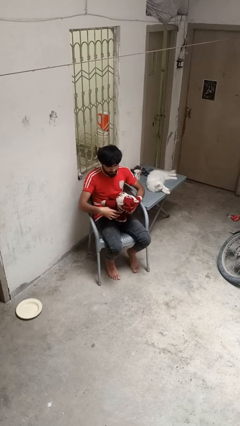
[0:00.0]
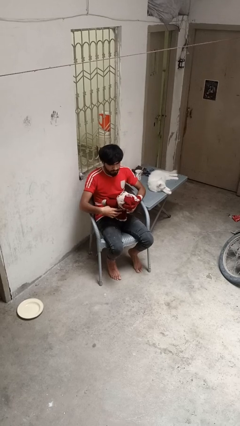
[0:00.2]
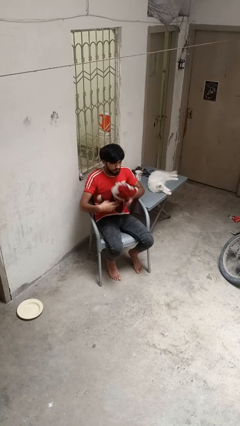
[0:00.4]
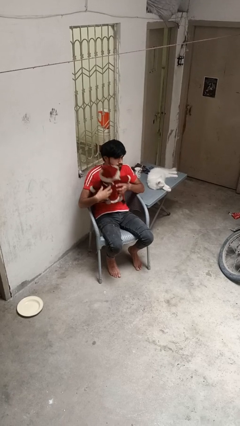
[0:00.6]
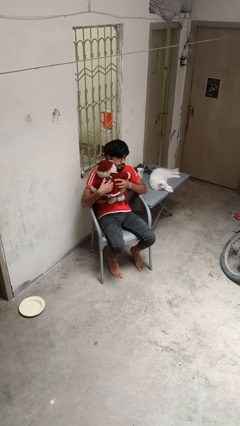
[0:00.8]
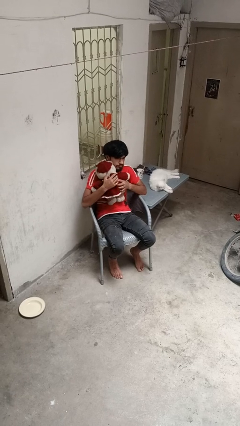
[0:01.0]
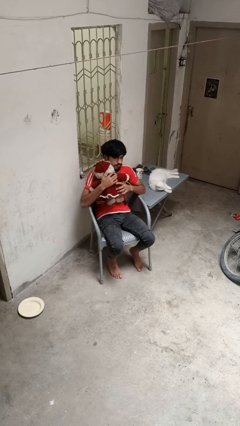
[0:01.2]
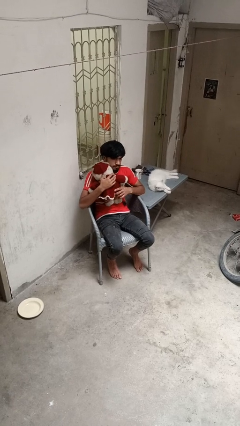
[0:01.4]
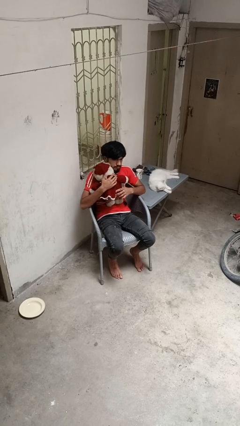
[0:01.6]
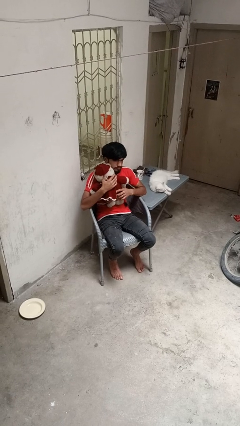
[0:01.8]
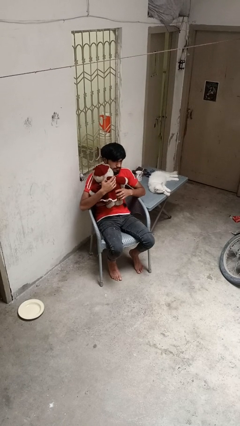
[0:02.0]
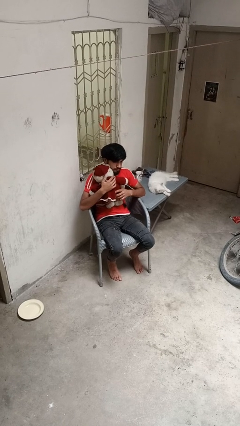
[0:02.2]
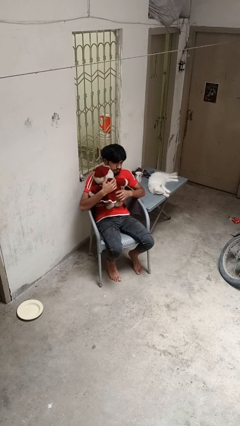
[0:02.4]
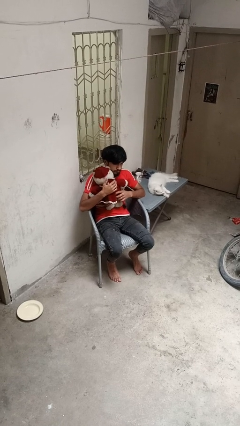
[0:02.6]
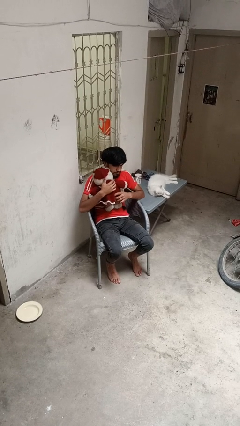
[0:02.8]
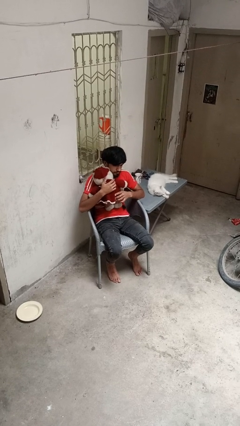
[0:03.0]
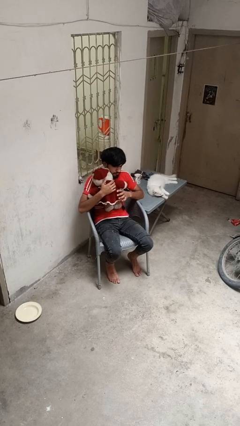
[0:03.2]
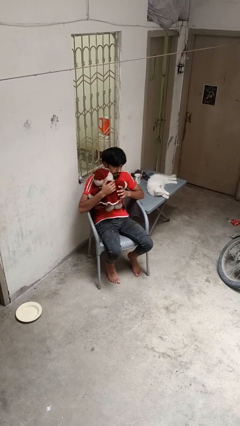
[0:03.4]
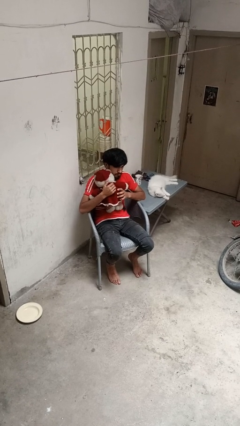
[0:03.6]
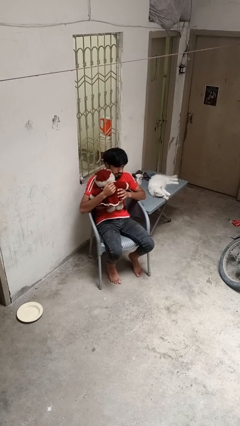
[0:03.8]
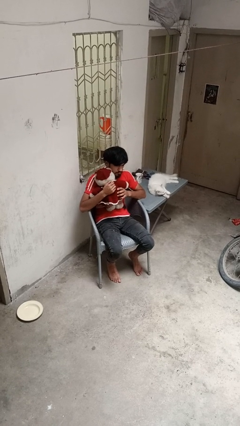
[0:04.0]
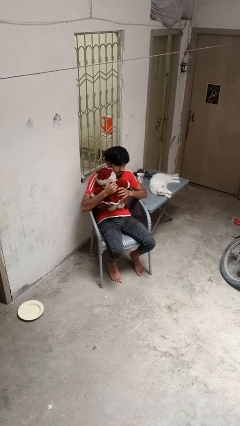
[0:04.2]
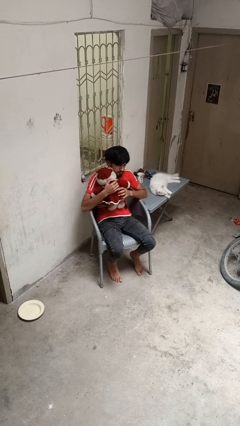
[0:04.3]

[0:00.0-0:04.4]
person hugs stuffed animal

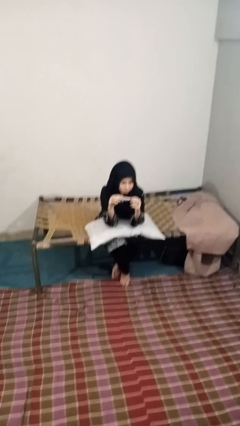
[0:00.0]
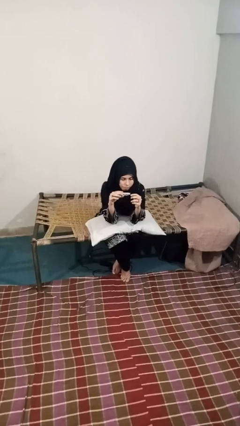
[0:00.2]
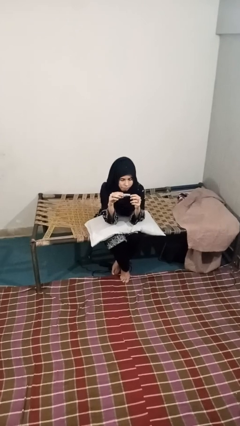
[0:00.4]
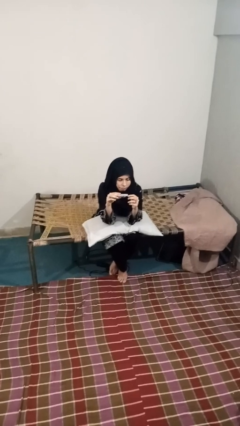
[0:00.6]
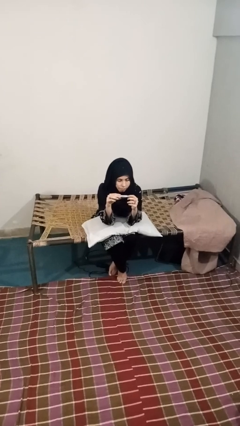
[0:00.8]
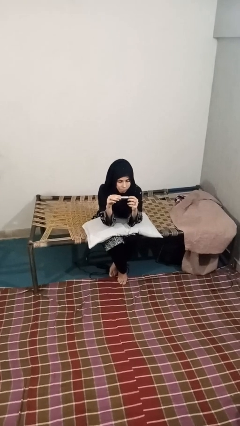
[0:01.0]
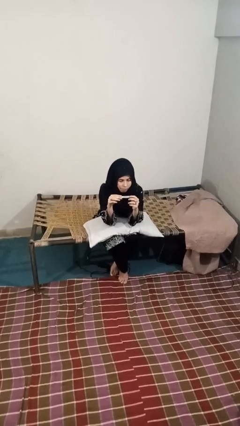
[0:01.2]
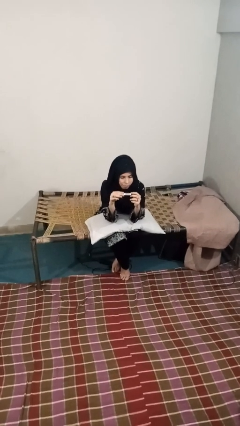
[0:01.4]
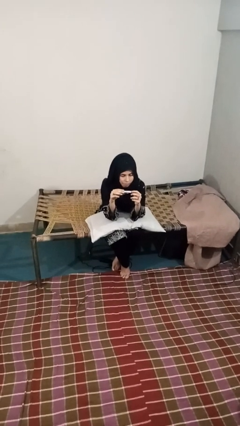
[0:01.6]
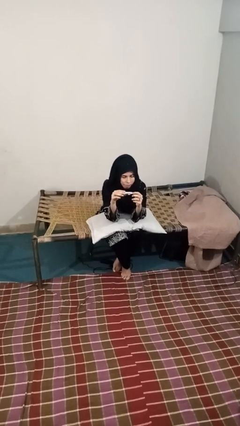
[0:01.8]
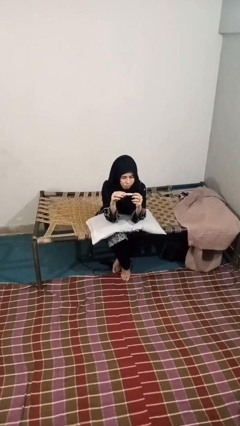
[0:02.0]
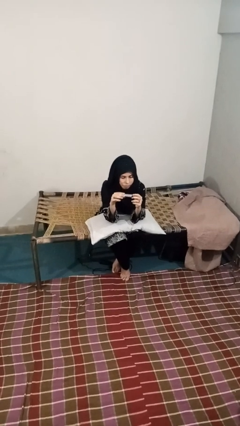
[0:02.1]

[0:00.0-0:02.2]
person clips fingernails

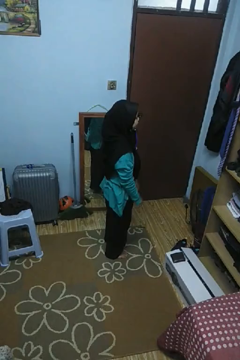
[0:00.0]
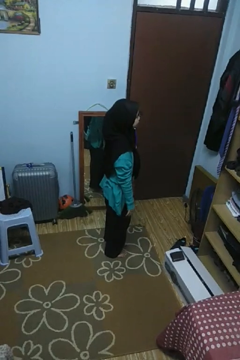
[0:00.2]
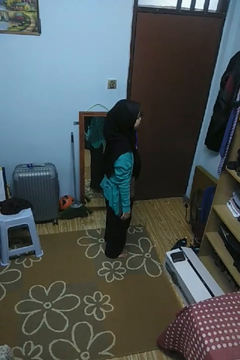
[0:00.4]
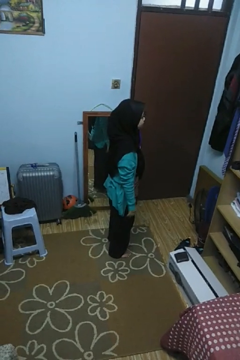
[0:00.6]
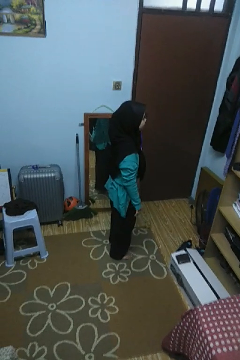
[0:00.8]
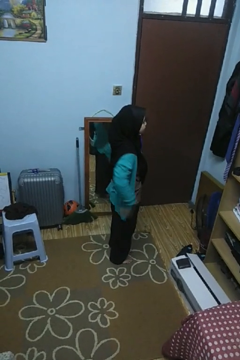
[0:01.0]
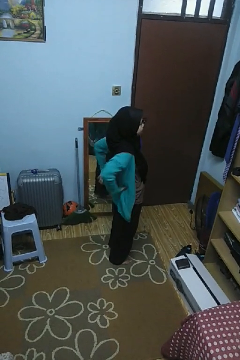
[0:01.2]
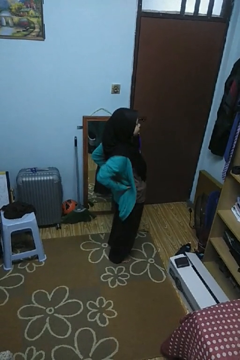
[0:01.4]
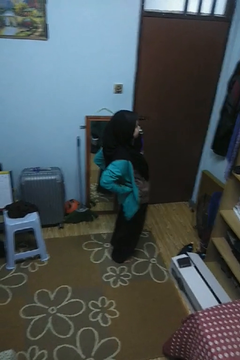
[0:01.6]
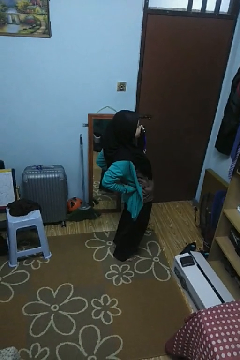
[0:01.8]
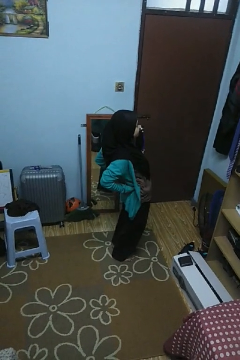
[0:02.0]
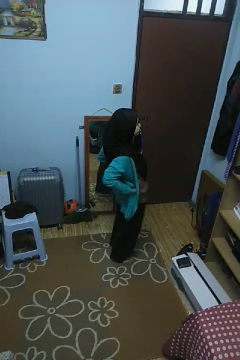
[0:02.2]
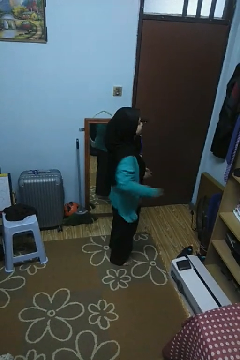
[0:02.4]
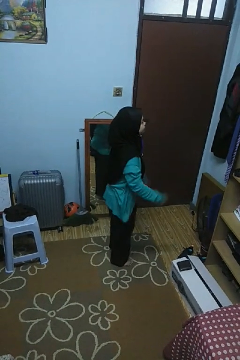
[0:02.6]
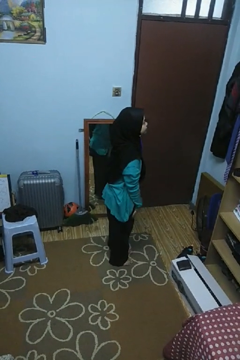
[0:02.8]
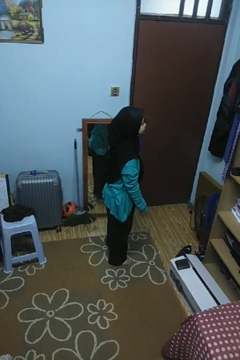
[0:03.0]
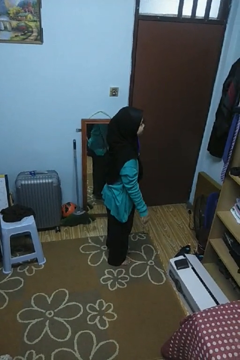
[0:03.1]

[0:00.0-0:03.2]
person stretches back

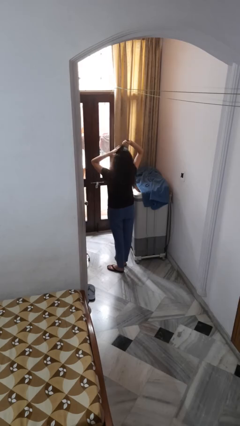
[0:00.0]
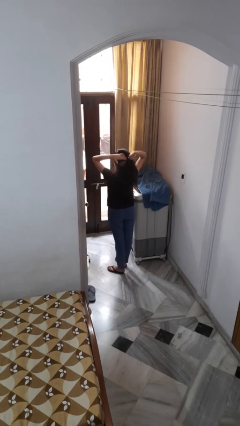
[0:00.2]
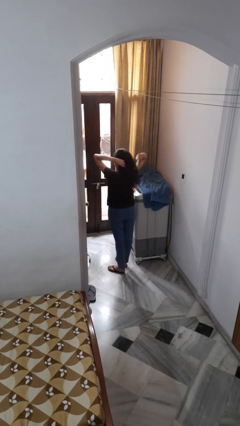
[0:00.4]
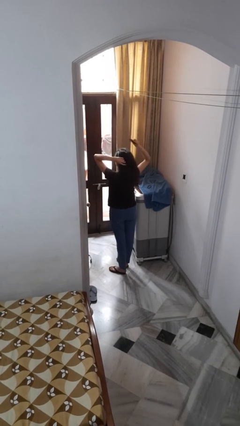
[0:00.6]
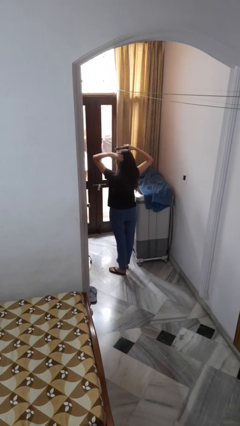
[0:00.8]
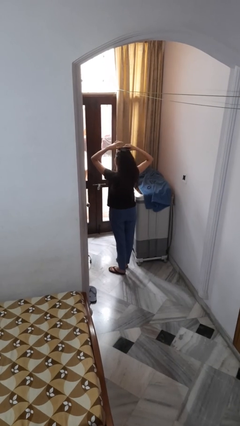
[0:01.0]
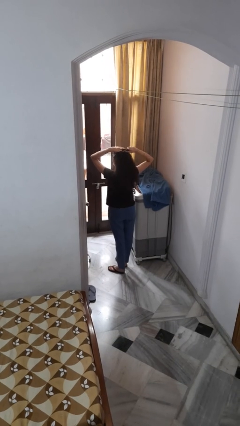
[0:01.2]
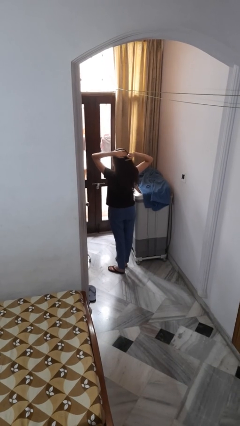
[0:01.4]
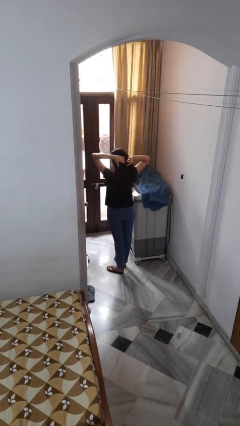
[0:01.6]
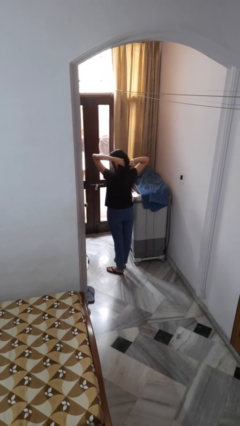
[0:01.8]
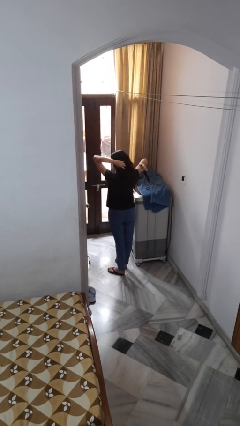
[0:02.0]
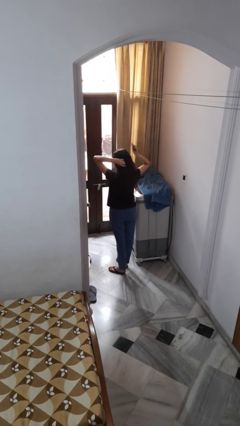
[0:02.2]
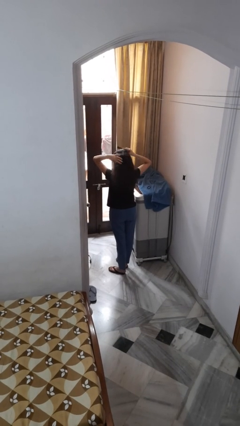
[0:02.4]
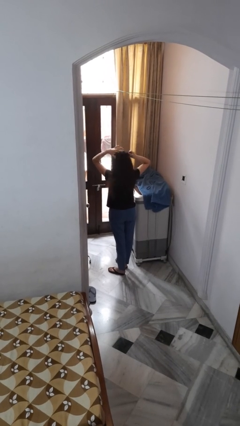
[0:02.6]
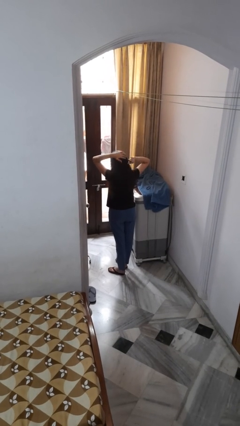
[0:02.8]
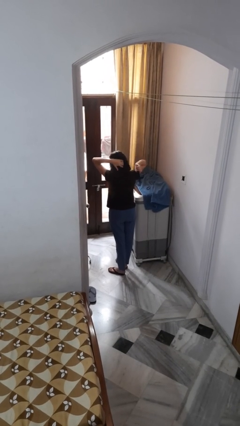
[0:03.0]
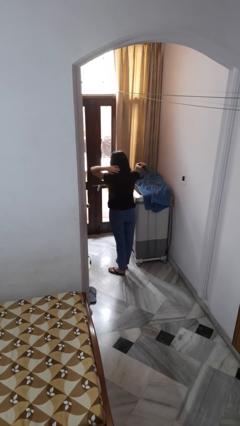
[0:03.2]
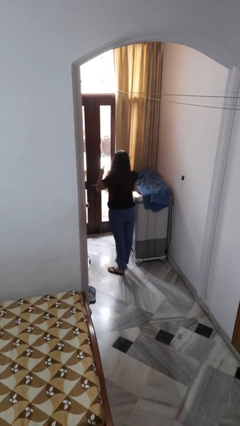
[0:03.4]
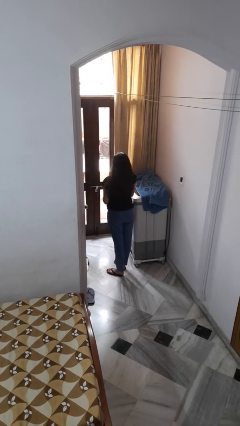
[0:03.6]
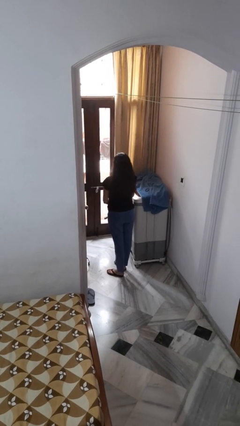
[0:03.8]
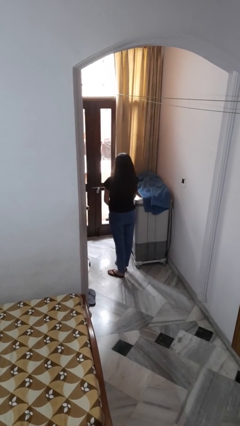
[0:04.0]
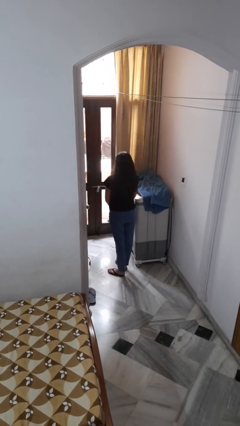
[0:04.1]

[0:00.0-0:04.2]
person brushes hair

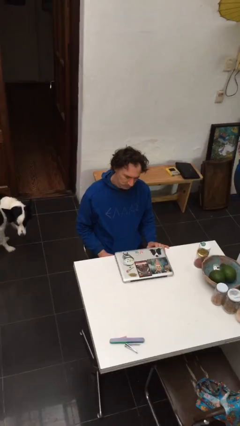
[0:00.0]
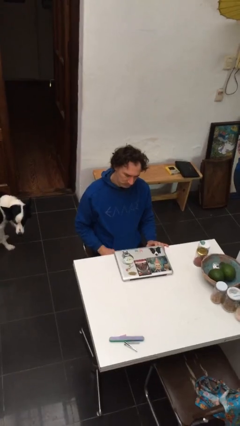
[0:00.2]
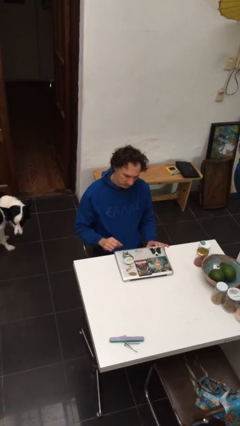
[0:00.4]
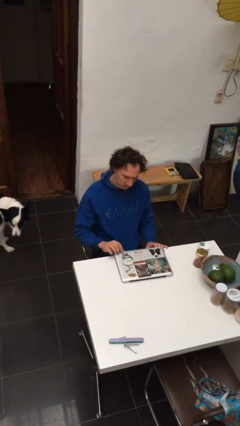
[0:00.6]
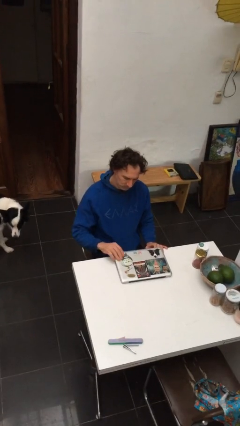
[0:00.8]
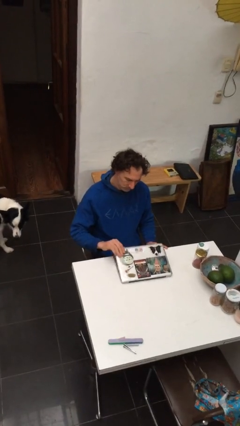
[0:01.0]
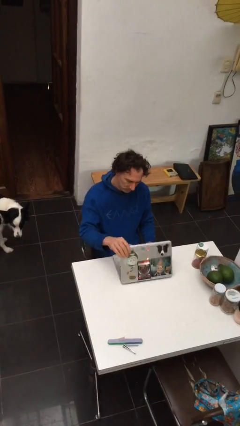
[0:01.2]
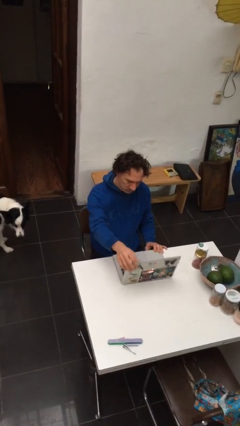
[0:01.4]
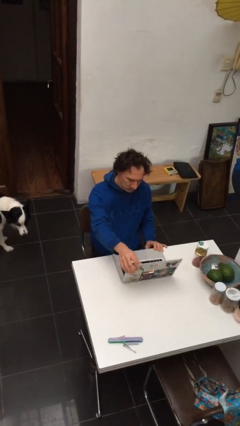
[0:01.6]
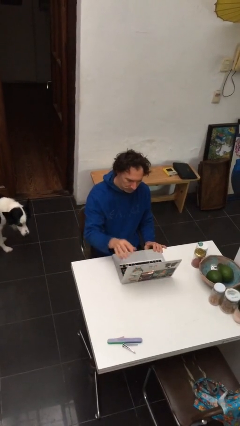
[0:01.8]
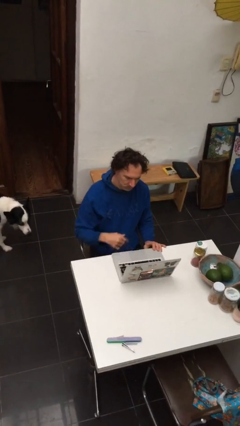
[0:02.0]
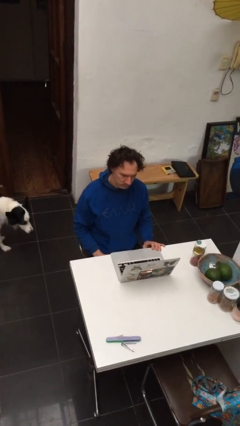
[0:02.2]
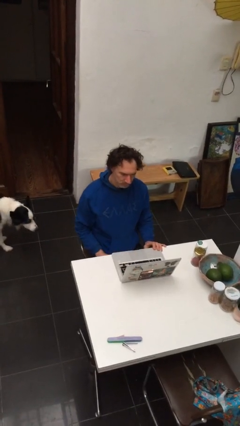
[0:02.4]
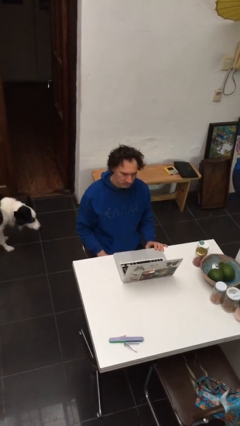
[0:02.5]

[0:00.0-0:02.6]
person opens laptop

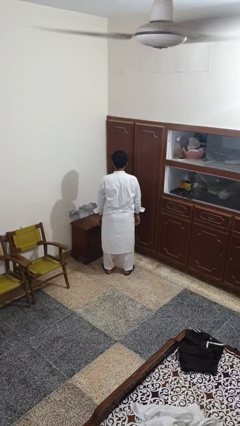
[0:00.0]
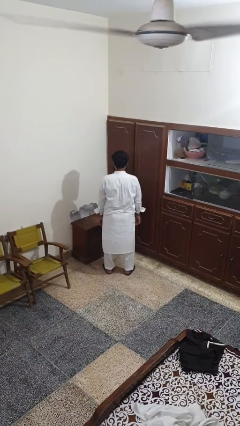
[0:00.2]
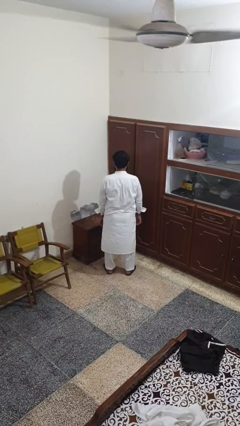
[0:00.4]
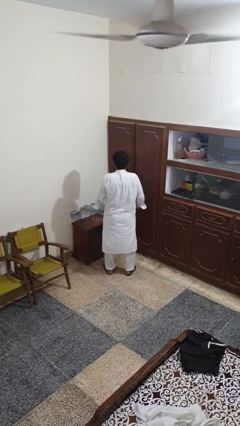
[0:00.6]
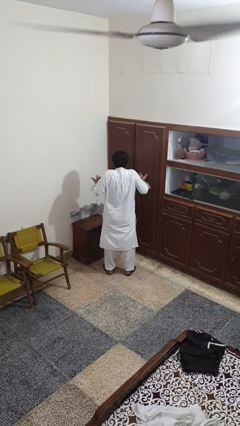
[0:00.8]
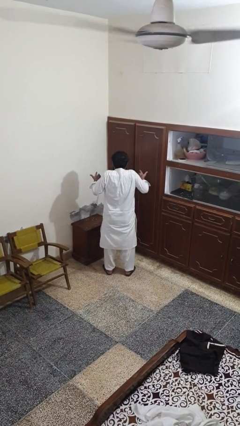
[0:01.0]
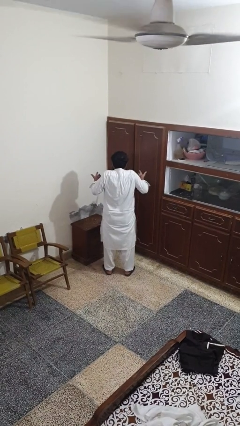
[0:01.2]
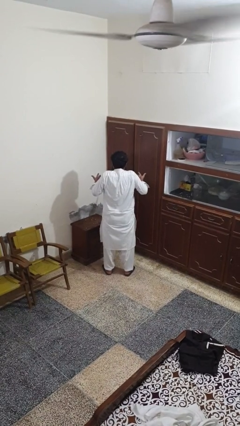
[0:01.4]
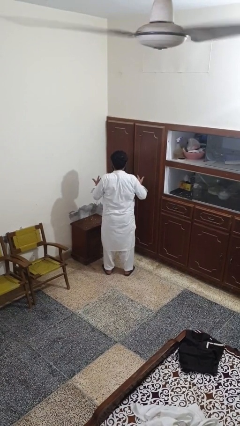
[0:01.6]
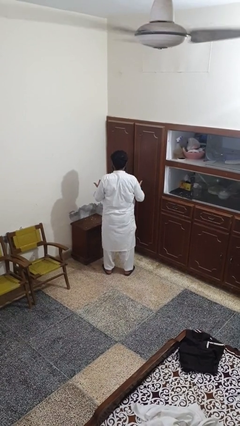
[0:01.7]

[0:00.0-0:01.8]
person shrugs
